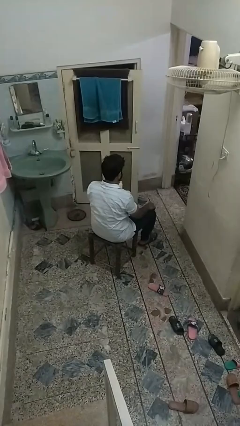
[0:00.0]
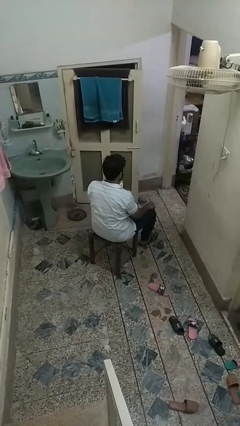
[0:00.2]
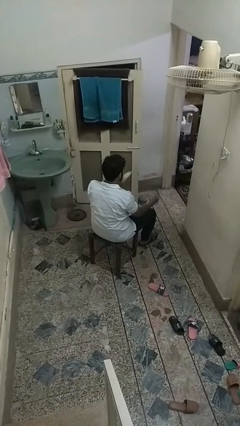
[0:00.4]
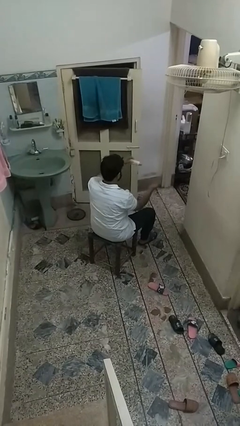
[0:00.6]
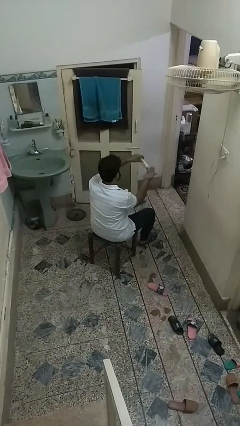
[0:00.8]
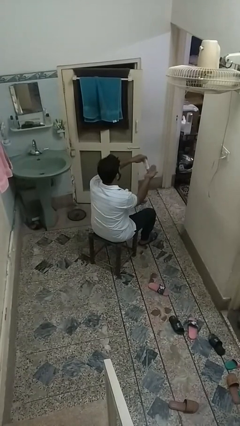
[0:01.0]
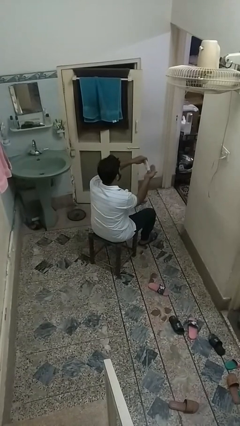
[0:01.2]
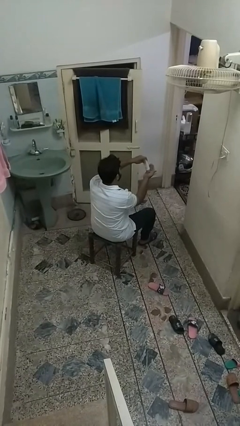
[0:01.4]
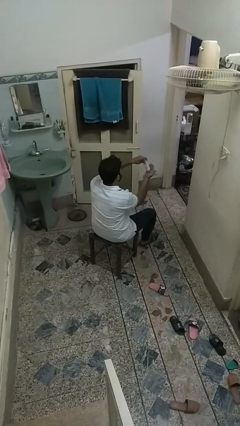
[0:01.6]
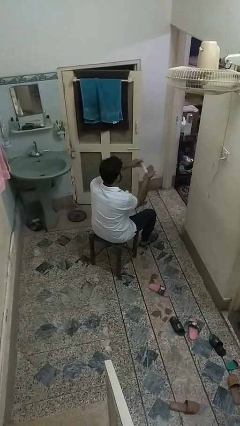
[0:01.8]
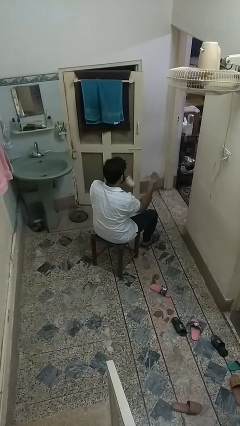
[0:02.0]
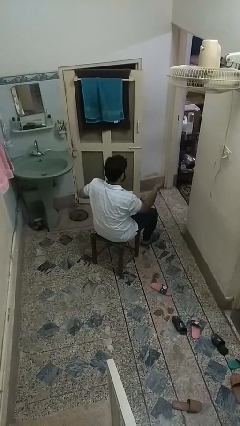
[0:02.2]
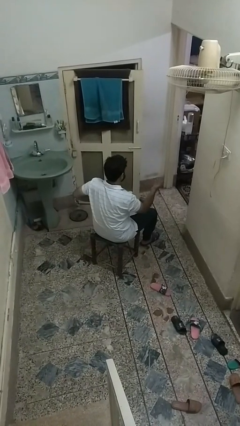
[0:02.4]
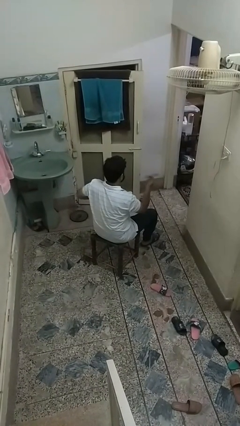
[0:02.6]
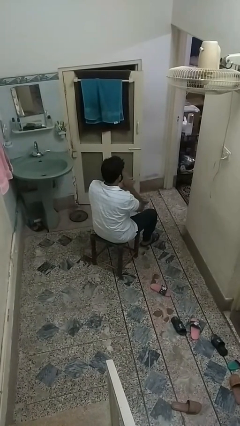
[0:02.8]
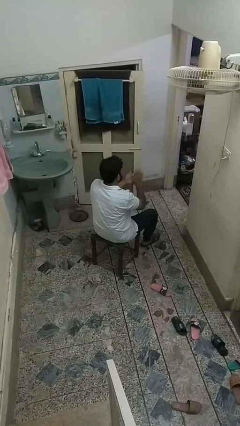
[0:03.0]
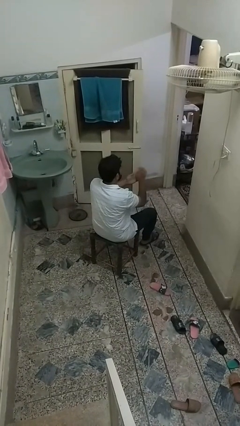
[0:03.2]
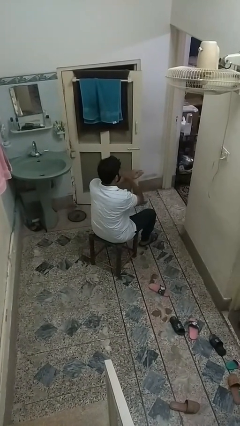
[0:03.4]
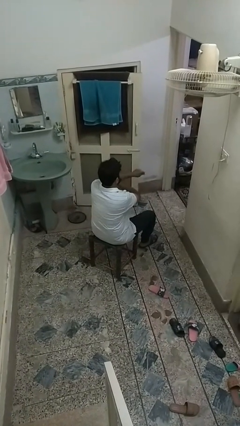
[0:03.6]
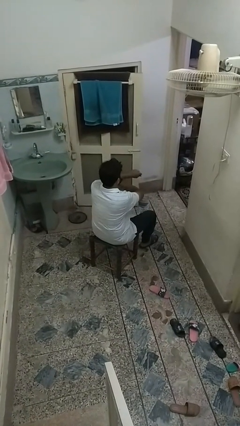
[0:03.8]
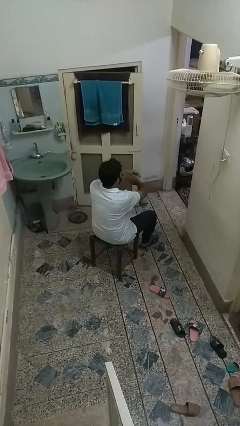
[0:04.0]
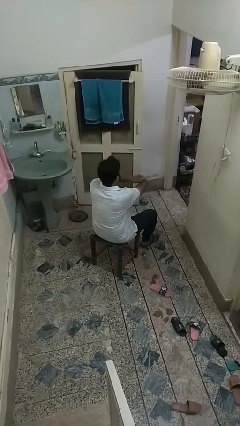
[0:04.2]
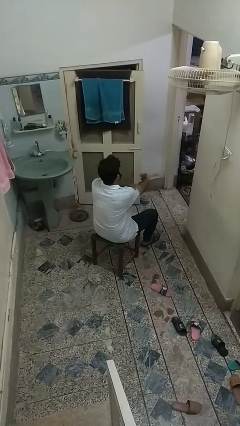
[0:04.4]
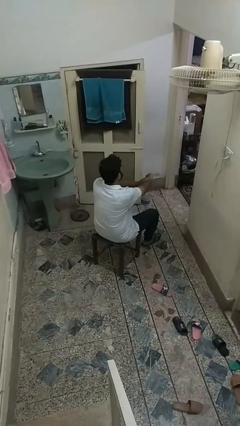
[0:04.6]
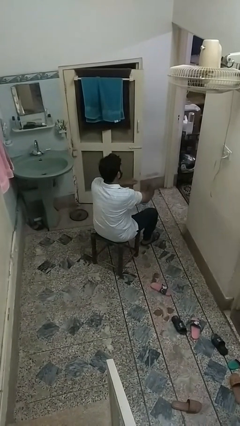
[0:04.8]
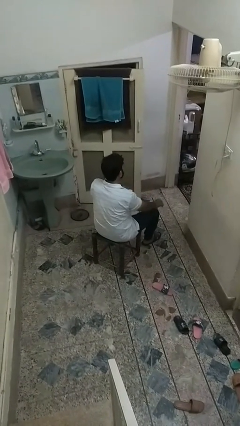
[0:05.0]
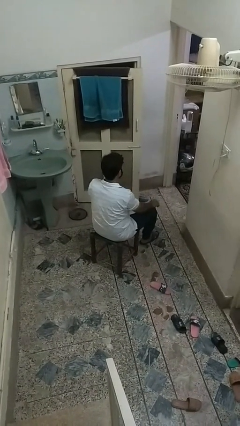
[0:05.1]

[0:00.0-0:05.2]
person applies sunscreen

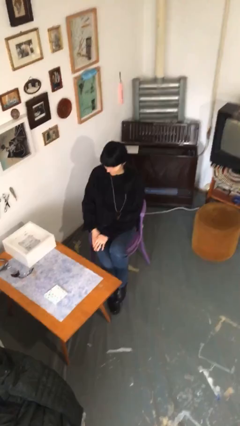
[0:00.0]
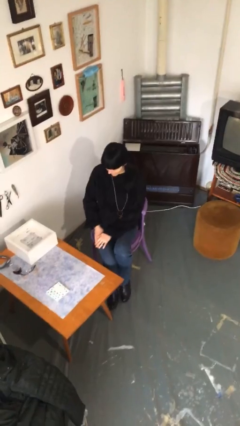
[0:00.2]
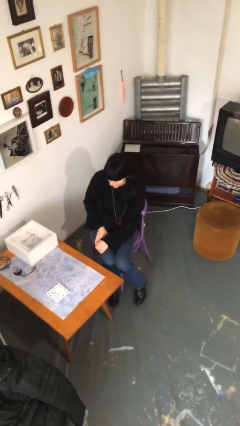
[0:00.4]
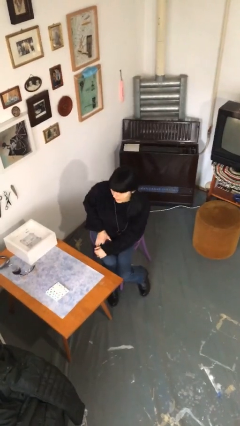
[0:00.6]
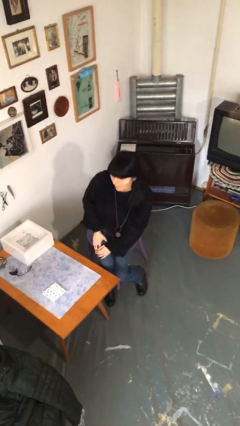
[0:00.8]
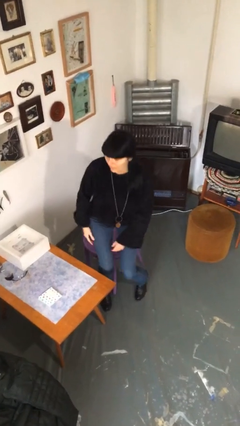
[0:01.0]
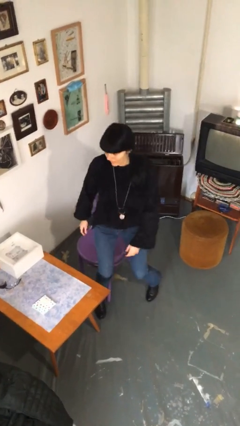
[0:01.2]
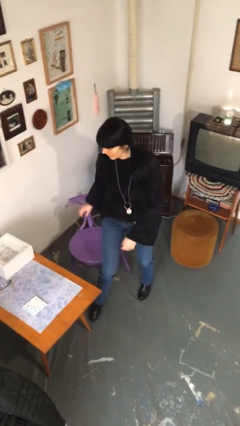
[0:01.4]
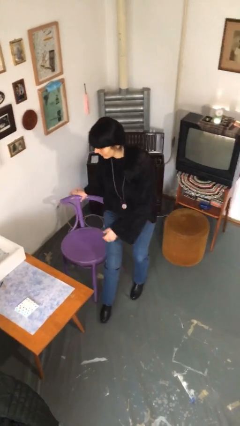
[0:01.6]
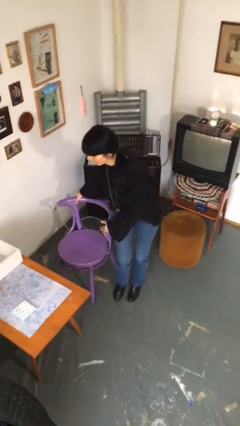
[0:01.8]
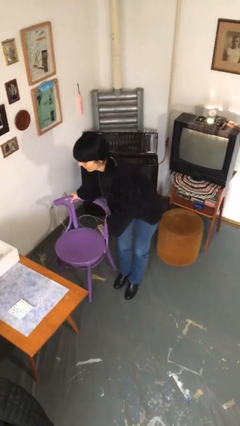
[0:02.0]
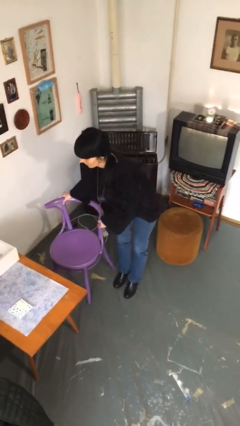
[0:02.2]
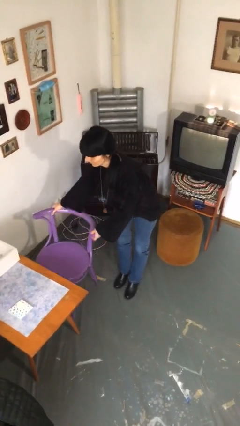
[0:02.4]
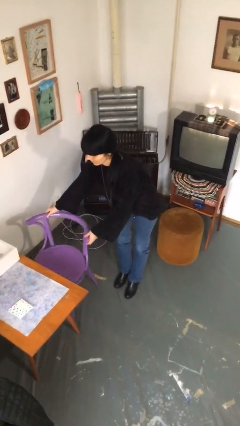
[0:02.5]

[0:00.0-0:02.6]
person stands up

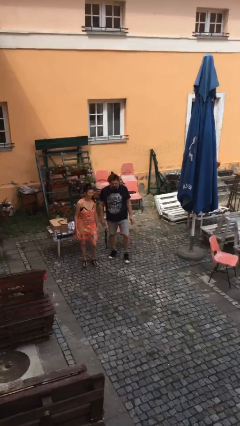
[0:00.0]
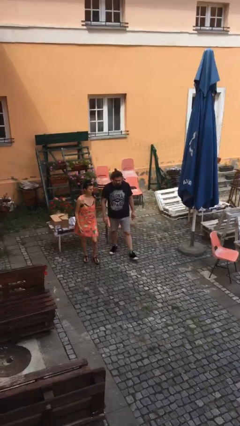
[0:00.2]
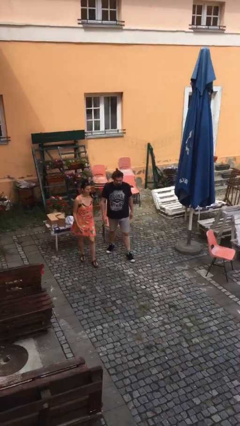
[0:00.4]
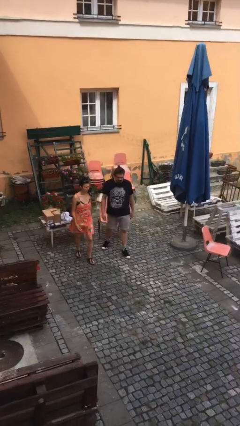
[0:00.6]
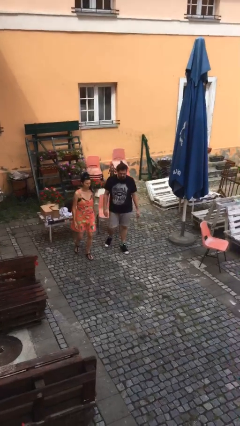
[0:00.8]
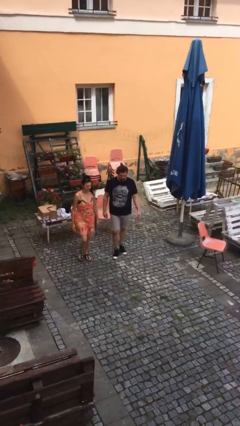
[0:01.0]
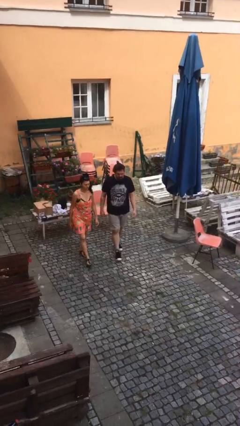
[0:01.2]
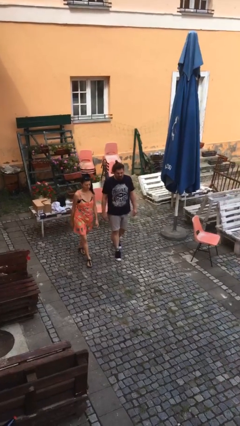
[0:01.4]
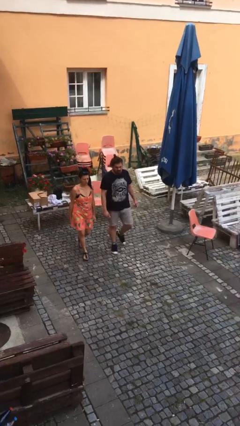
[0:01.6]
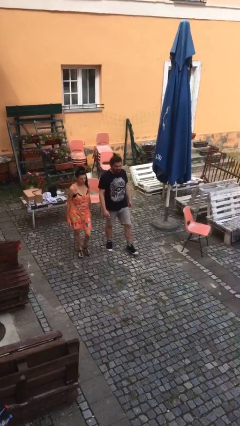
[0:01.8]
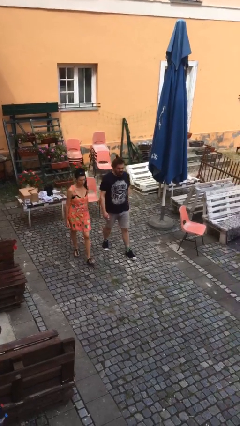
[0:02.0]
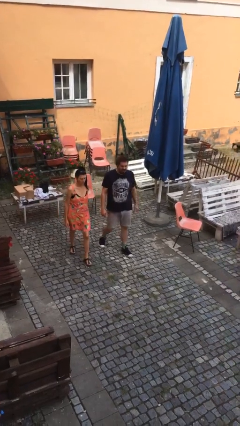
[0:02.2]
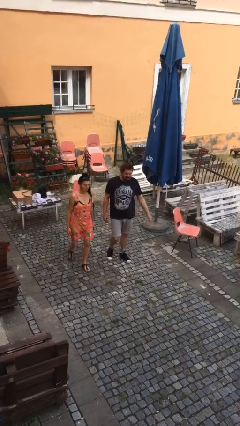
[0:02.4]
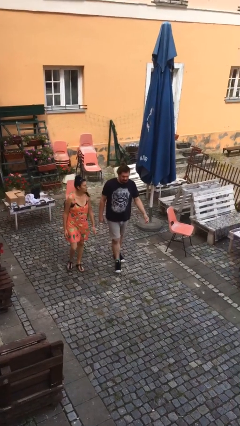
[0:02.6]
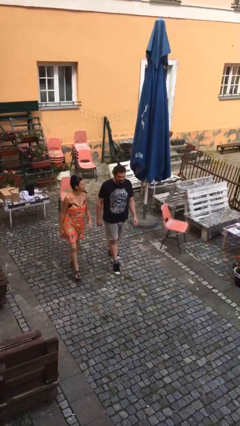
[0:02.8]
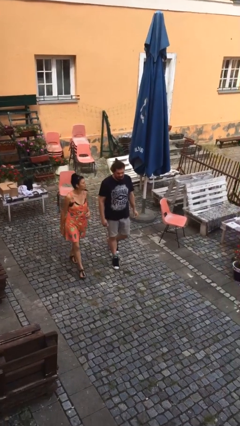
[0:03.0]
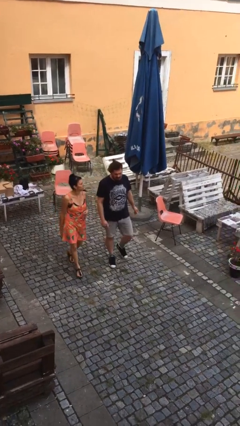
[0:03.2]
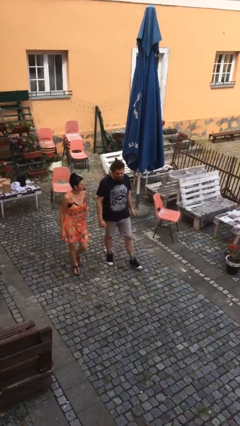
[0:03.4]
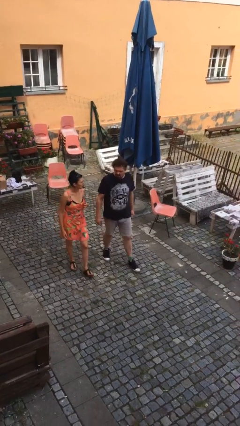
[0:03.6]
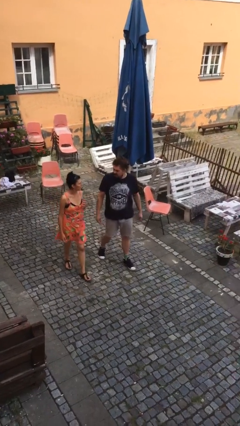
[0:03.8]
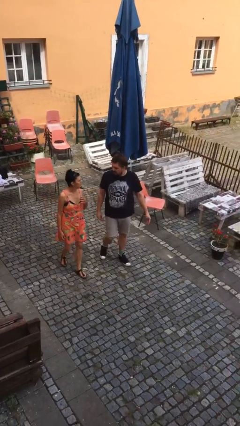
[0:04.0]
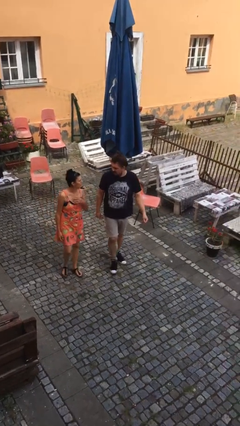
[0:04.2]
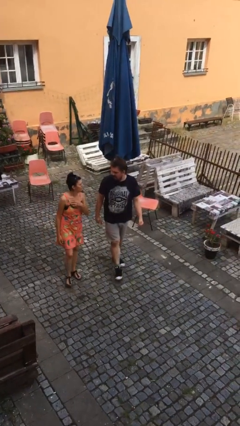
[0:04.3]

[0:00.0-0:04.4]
person talks to person

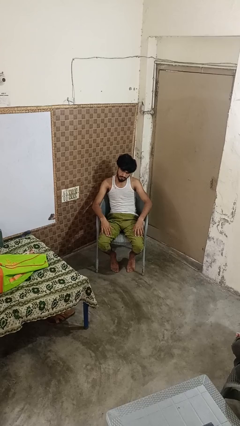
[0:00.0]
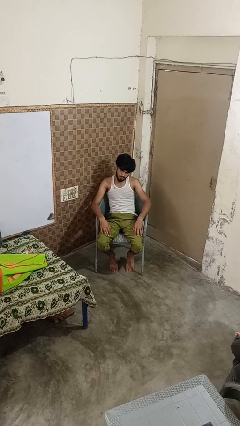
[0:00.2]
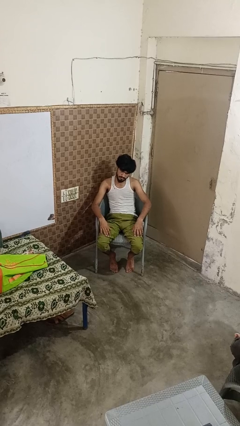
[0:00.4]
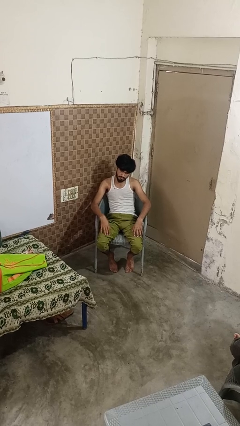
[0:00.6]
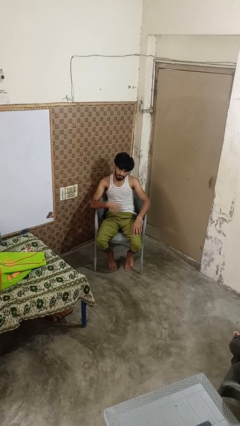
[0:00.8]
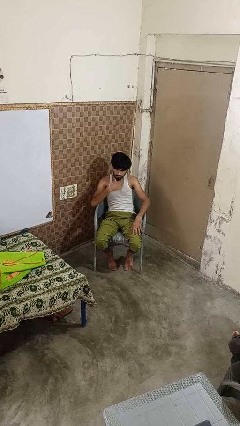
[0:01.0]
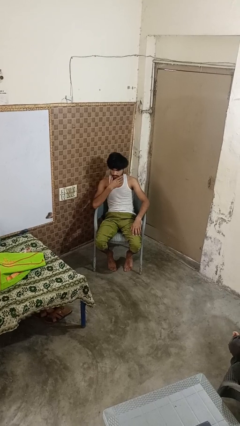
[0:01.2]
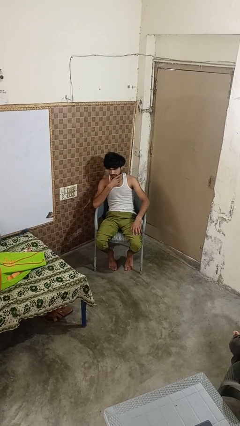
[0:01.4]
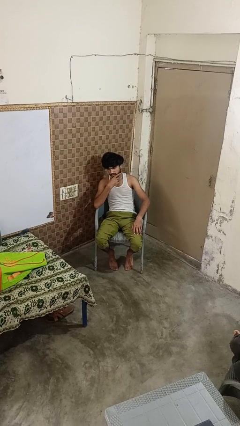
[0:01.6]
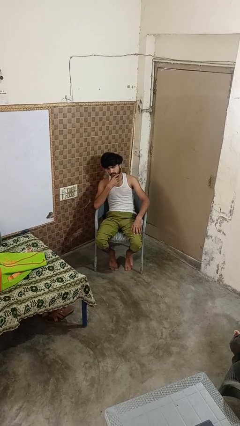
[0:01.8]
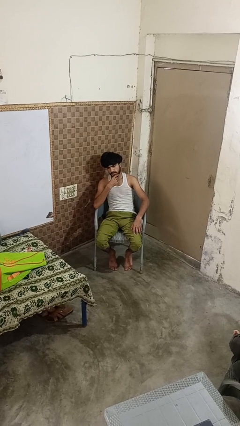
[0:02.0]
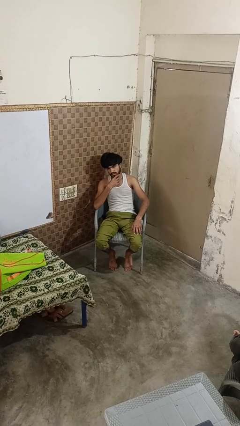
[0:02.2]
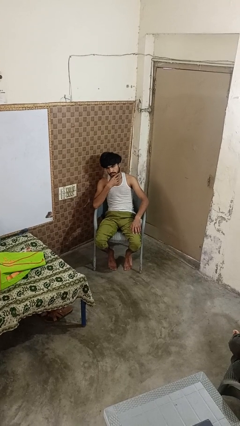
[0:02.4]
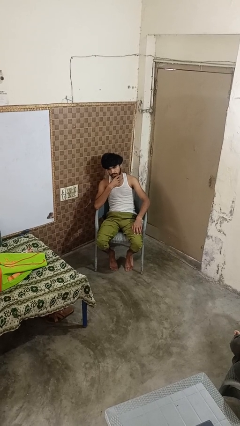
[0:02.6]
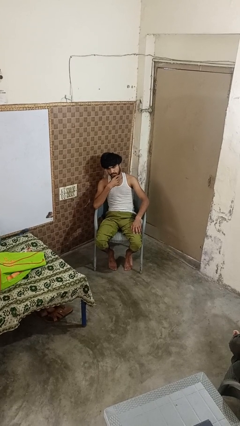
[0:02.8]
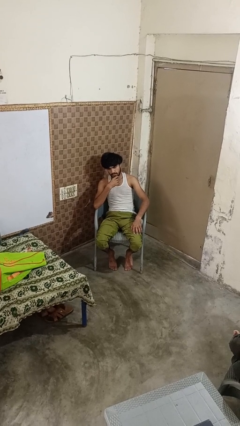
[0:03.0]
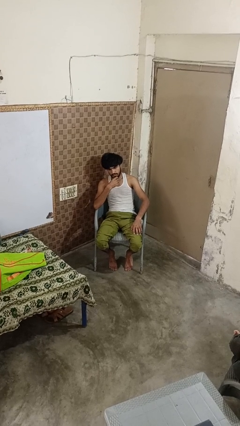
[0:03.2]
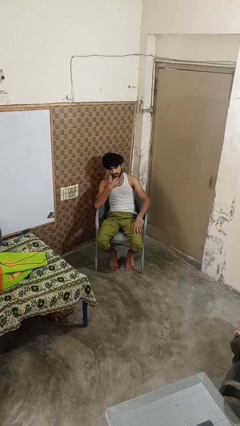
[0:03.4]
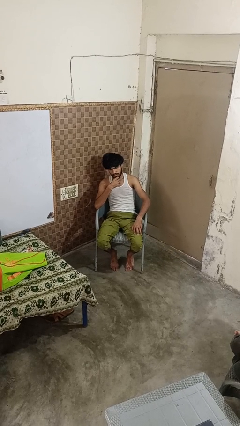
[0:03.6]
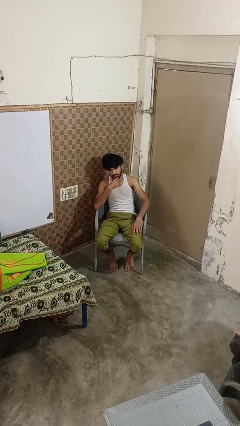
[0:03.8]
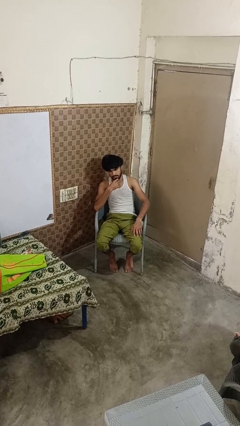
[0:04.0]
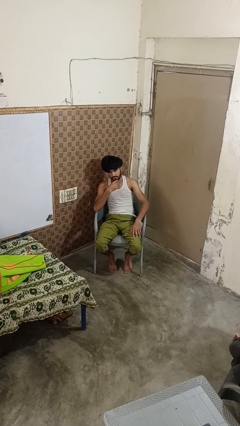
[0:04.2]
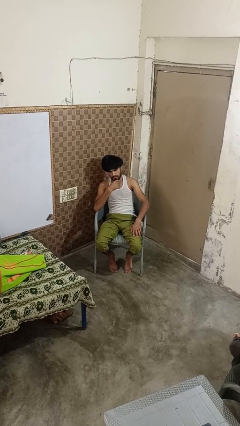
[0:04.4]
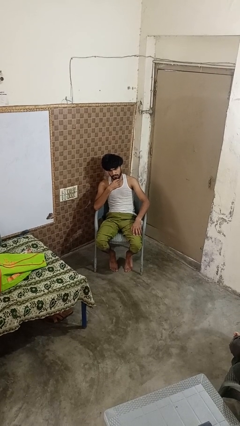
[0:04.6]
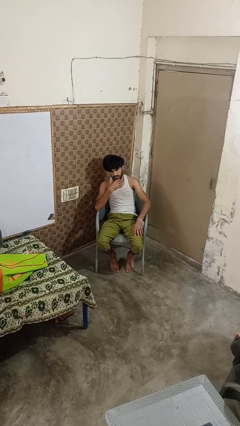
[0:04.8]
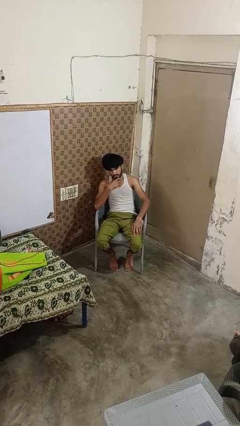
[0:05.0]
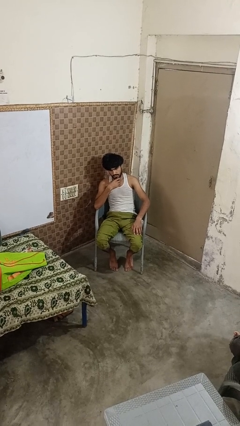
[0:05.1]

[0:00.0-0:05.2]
person strokes chin

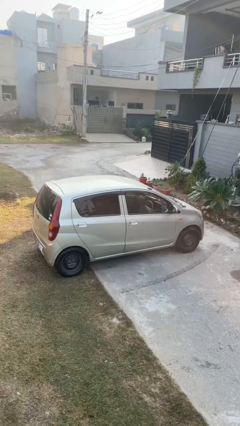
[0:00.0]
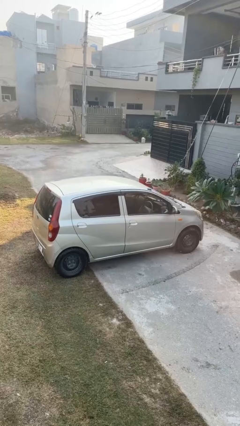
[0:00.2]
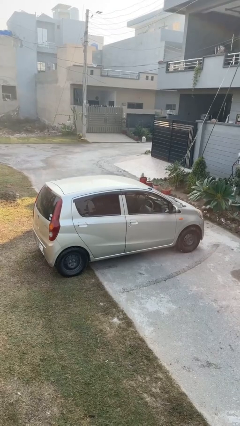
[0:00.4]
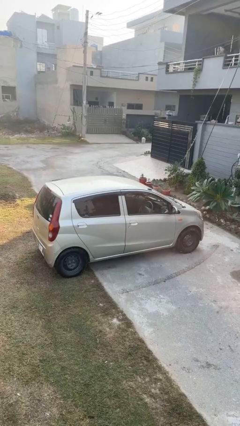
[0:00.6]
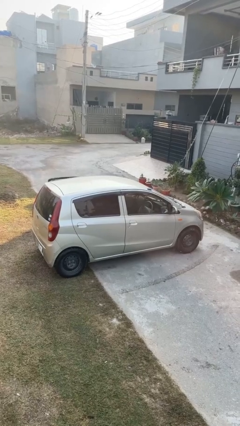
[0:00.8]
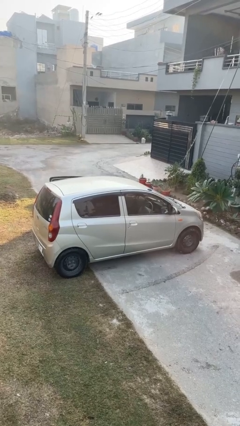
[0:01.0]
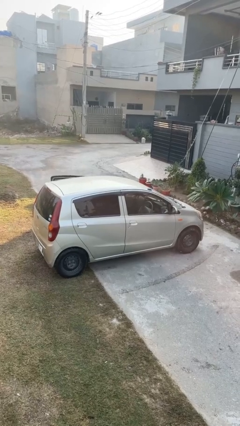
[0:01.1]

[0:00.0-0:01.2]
car drops off person
